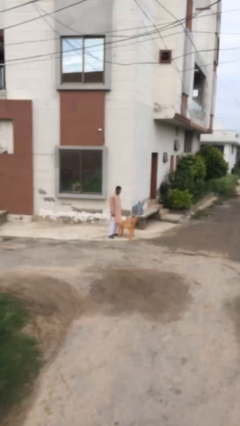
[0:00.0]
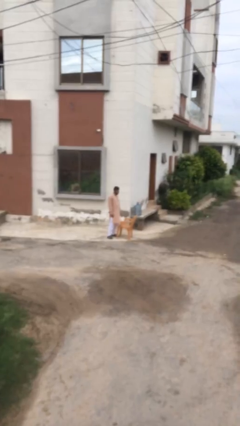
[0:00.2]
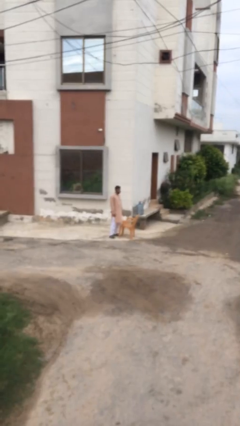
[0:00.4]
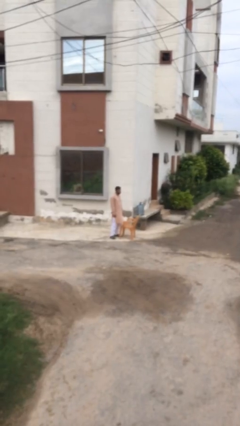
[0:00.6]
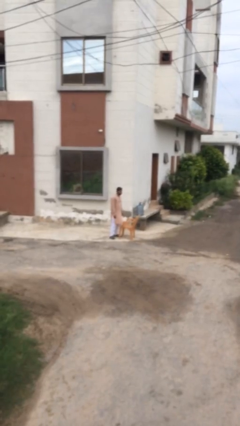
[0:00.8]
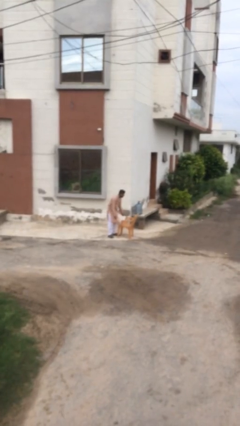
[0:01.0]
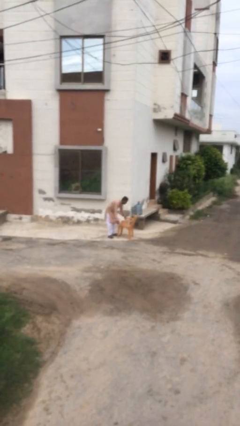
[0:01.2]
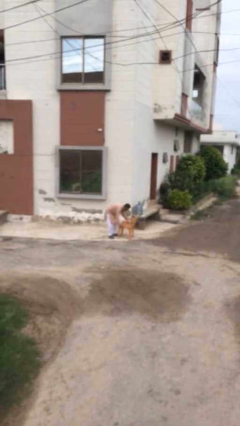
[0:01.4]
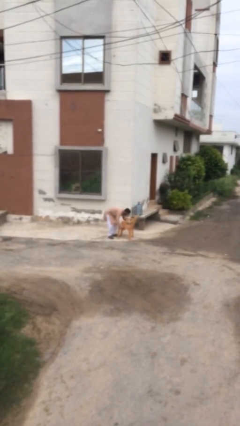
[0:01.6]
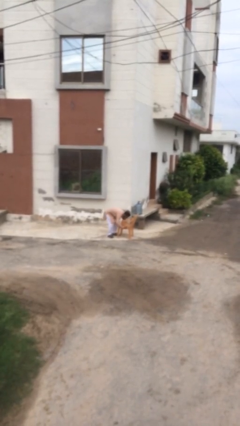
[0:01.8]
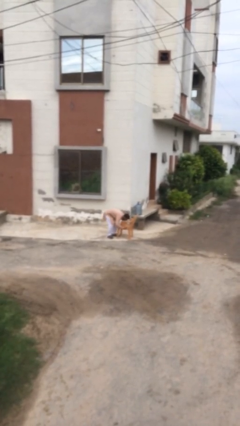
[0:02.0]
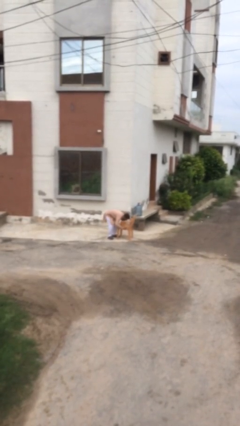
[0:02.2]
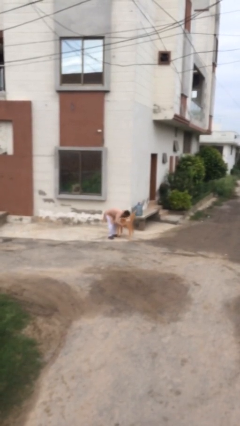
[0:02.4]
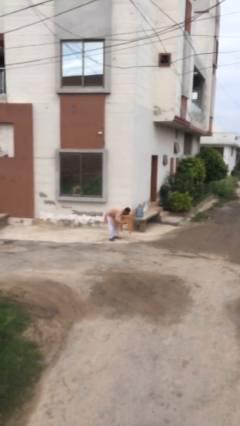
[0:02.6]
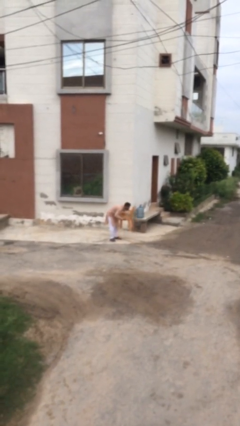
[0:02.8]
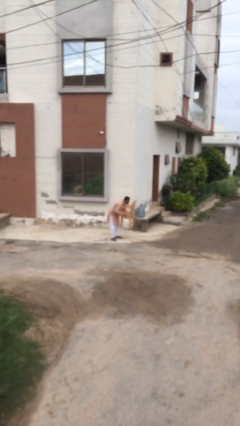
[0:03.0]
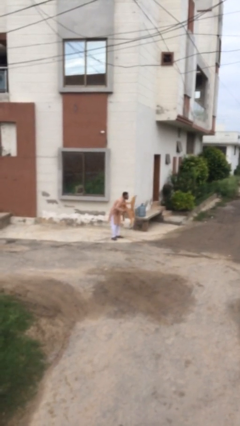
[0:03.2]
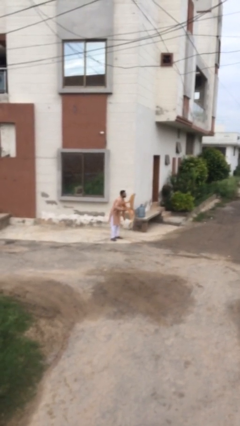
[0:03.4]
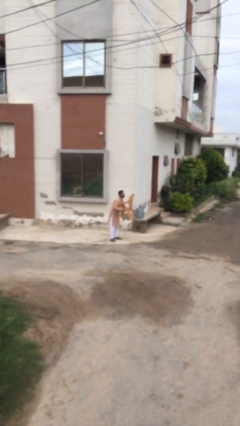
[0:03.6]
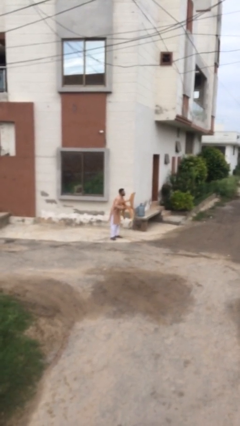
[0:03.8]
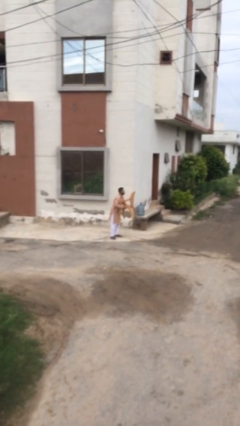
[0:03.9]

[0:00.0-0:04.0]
person picks up object from floor

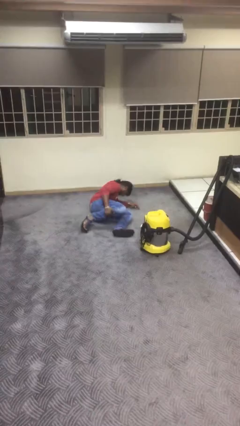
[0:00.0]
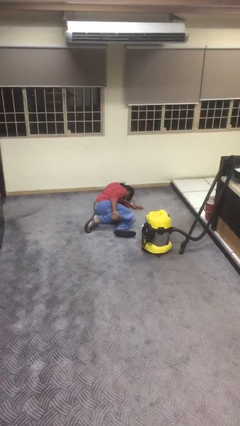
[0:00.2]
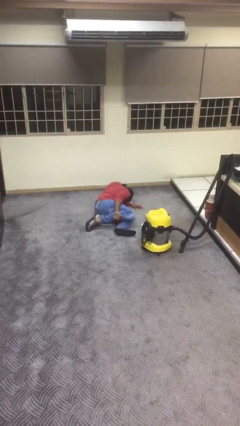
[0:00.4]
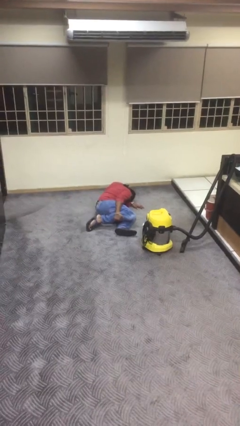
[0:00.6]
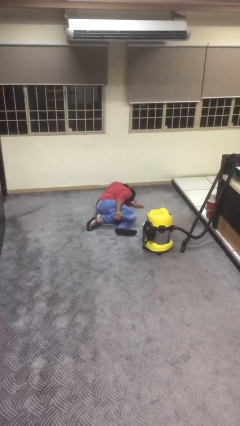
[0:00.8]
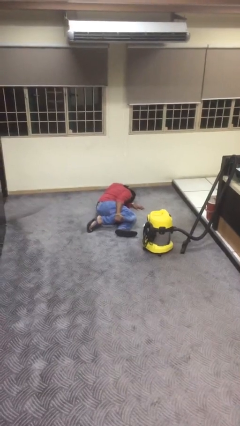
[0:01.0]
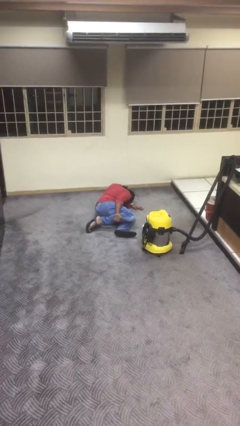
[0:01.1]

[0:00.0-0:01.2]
person lies down on floor

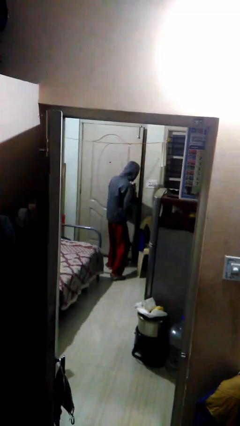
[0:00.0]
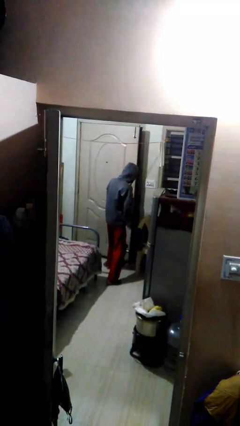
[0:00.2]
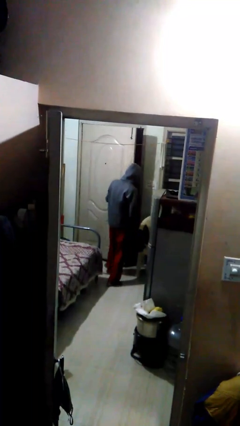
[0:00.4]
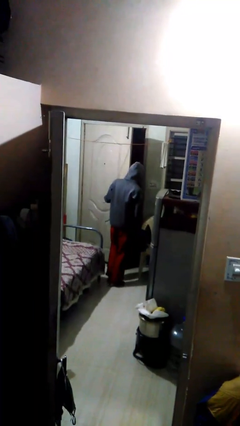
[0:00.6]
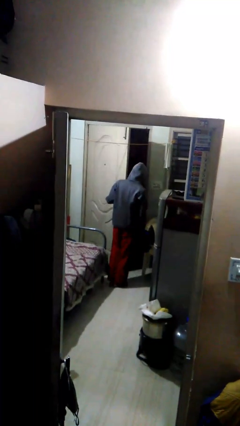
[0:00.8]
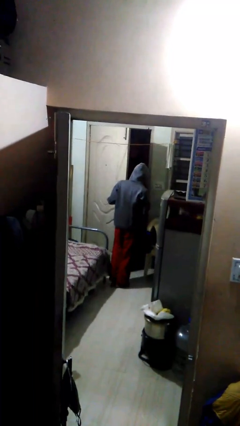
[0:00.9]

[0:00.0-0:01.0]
person closes facility door

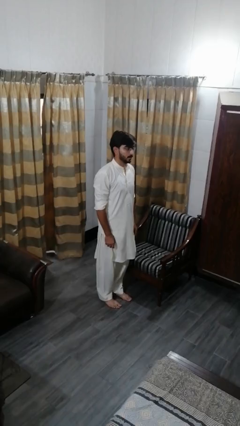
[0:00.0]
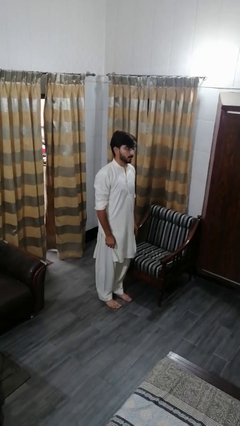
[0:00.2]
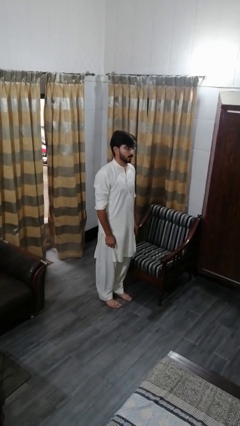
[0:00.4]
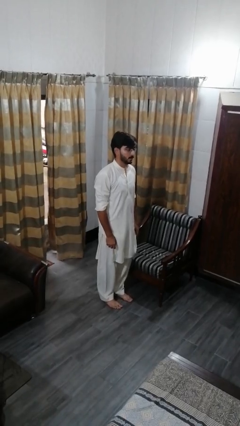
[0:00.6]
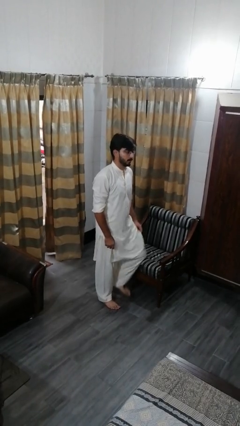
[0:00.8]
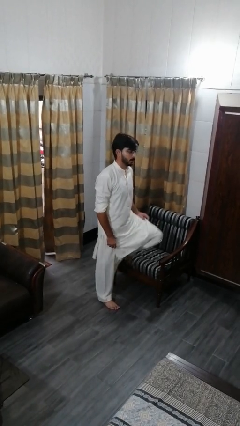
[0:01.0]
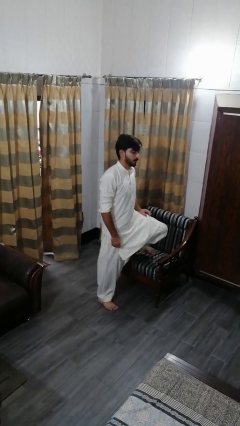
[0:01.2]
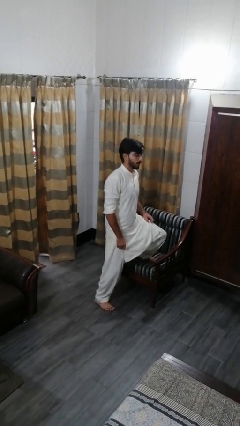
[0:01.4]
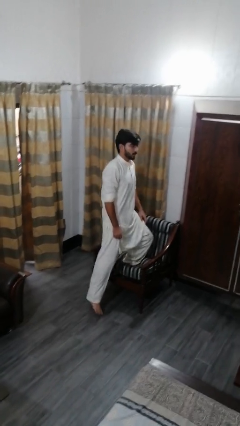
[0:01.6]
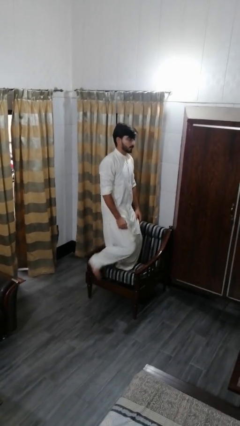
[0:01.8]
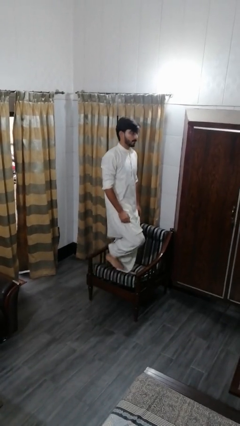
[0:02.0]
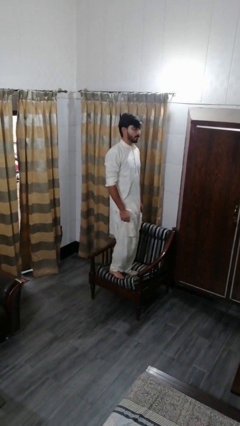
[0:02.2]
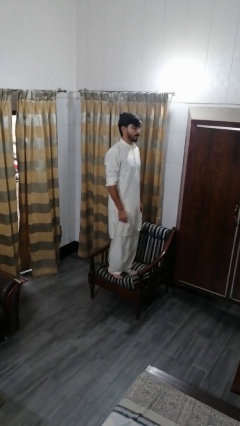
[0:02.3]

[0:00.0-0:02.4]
person climbs on chair

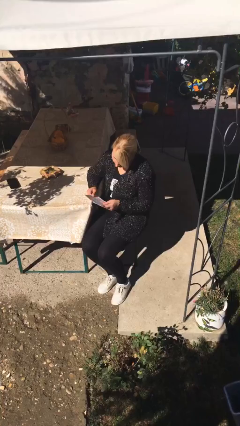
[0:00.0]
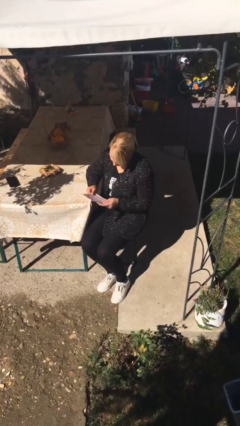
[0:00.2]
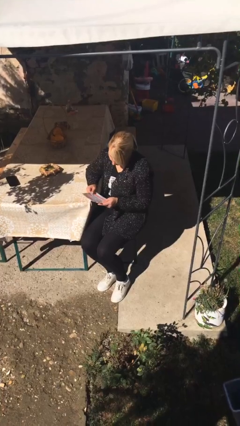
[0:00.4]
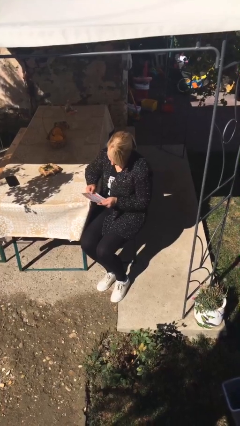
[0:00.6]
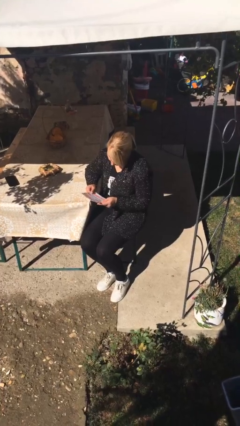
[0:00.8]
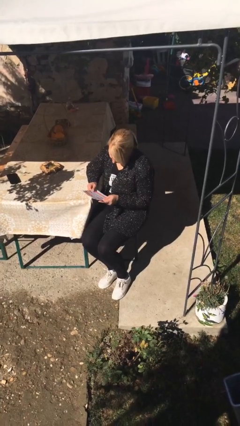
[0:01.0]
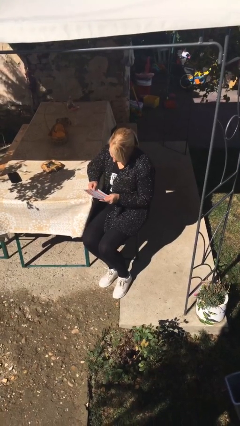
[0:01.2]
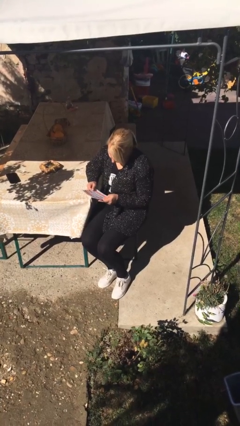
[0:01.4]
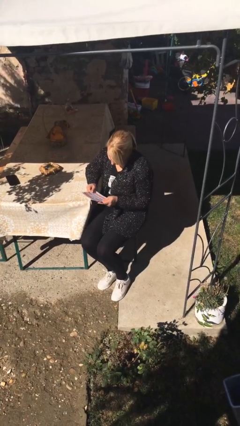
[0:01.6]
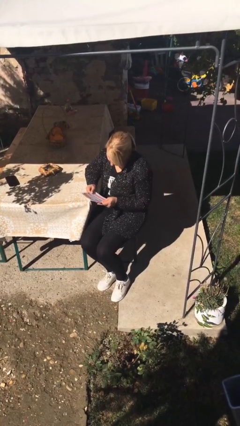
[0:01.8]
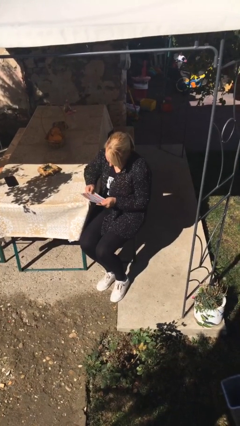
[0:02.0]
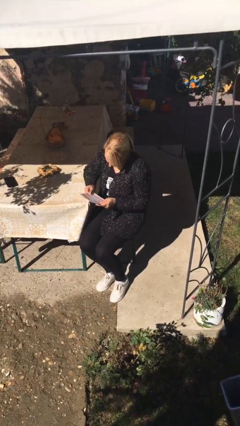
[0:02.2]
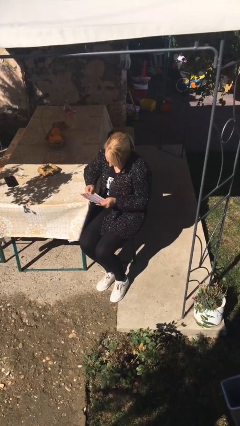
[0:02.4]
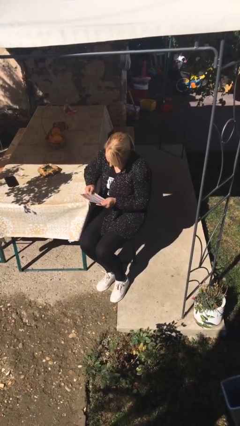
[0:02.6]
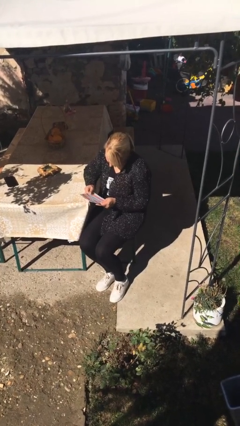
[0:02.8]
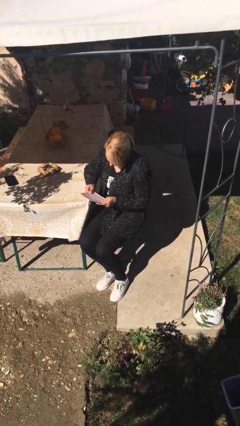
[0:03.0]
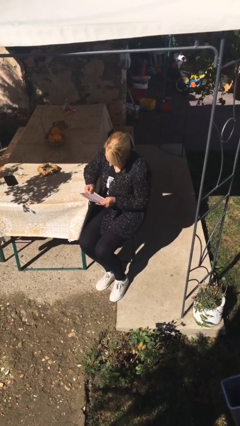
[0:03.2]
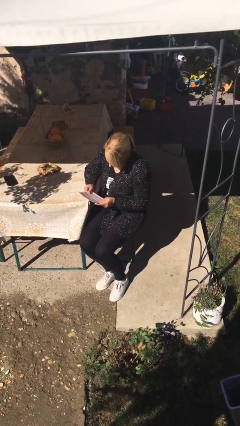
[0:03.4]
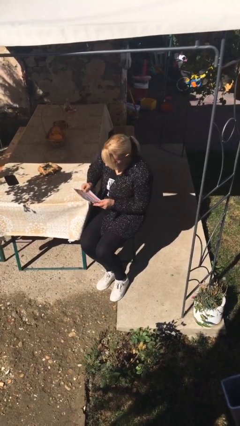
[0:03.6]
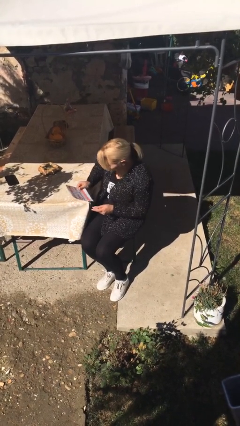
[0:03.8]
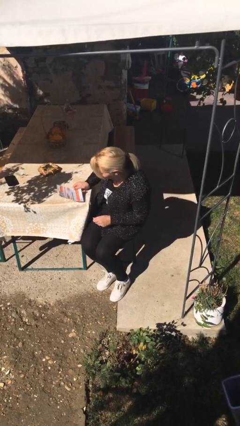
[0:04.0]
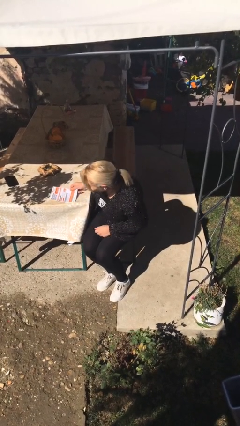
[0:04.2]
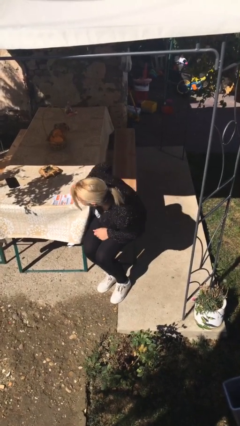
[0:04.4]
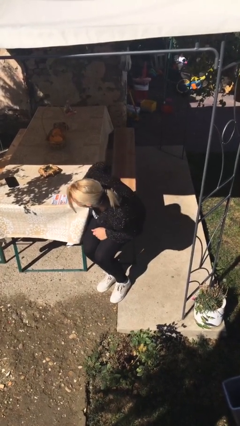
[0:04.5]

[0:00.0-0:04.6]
person reads document

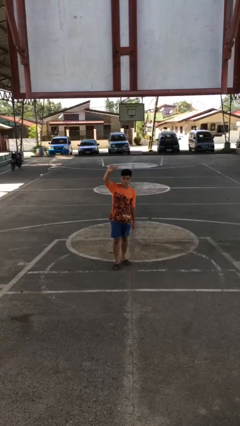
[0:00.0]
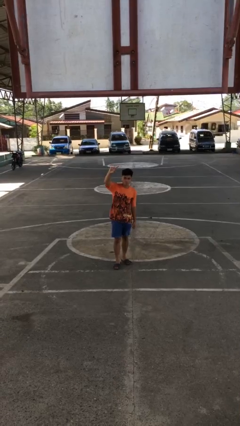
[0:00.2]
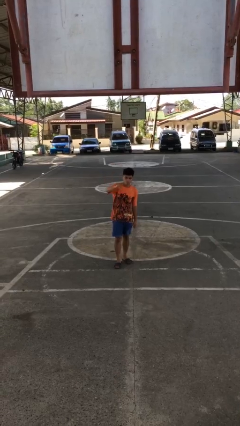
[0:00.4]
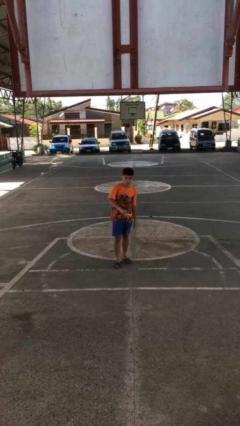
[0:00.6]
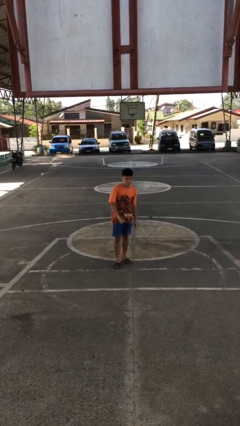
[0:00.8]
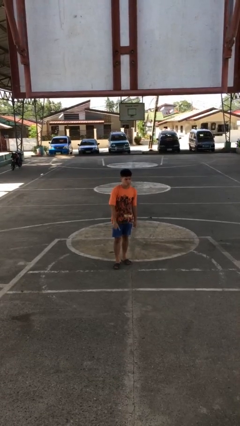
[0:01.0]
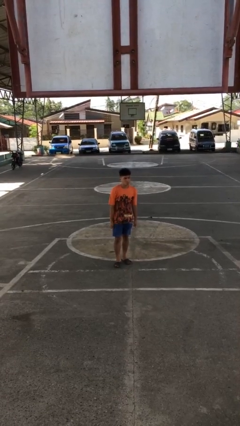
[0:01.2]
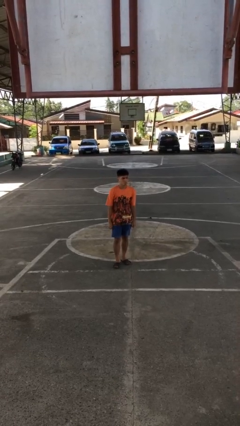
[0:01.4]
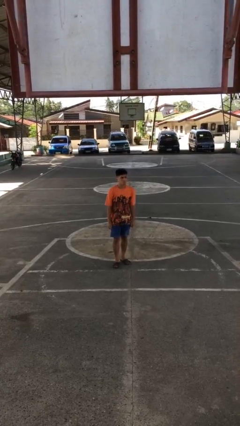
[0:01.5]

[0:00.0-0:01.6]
person gestures swipe down

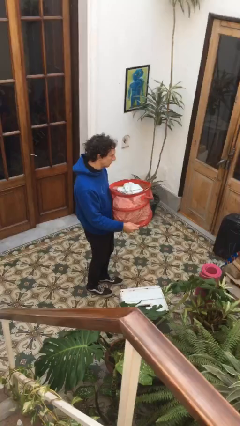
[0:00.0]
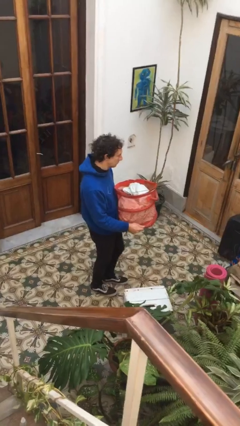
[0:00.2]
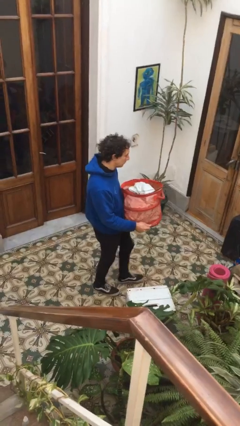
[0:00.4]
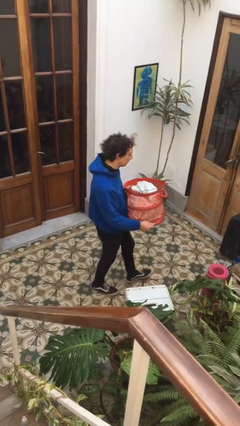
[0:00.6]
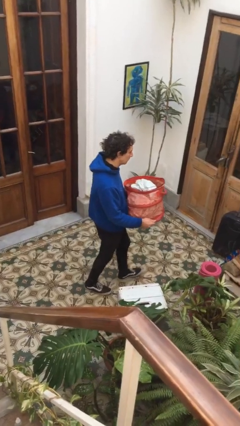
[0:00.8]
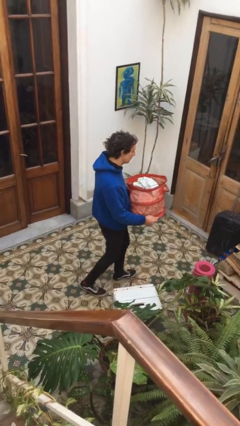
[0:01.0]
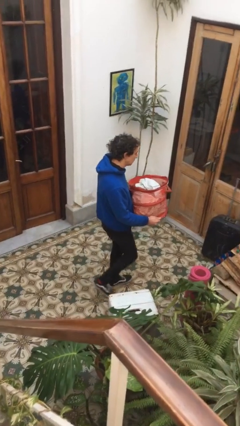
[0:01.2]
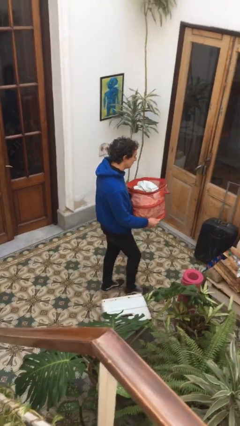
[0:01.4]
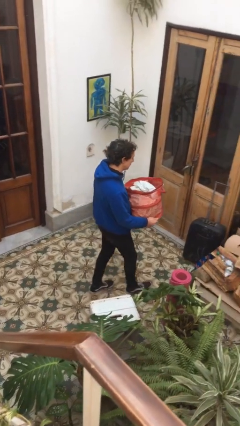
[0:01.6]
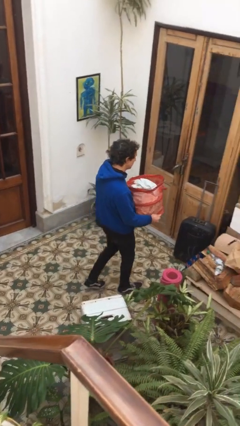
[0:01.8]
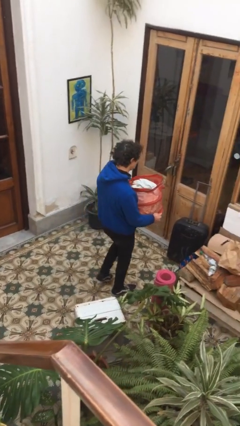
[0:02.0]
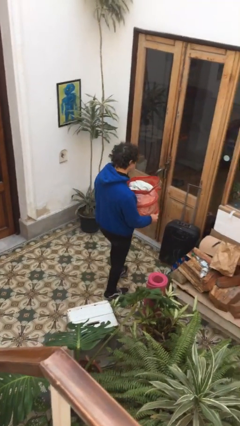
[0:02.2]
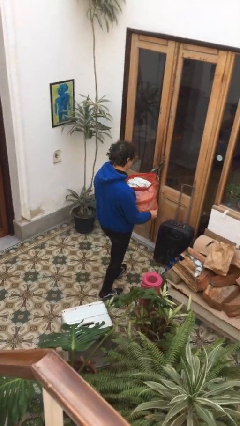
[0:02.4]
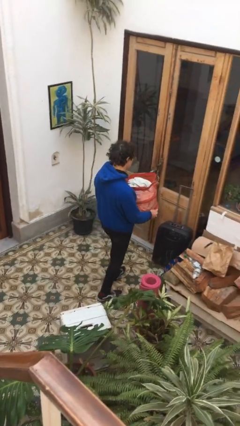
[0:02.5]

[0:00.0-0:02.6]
person carries laundry basket
